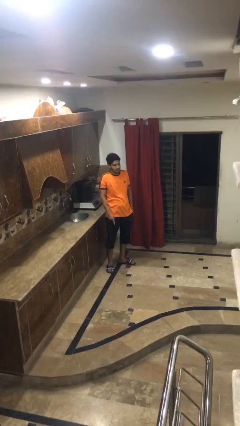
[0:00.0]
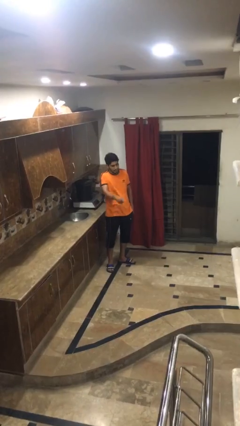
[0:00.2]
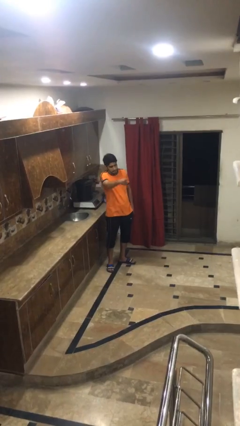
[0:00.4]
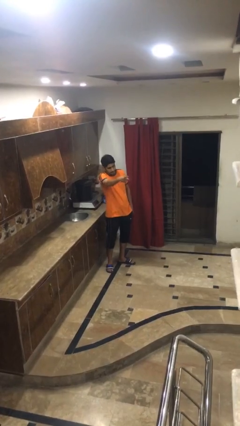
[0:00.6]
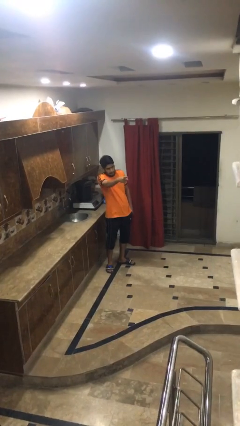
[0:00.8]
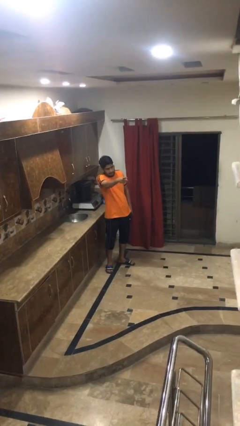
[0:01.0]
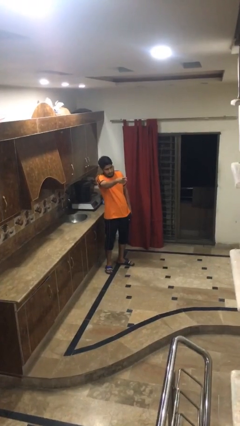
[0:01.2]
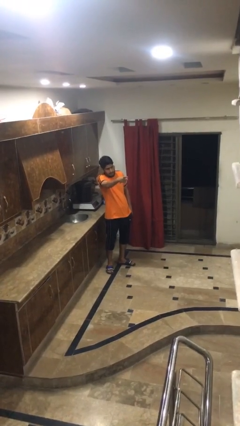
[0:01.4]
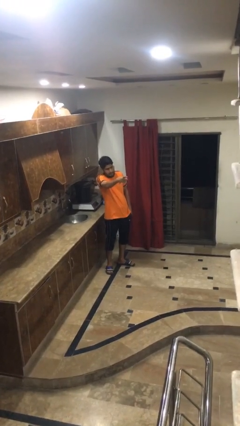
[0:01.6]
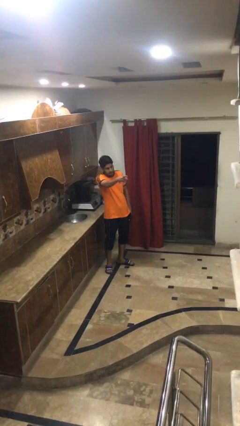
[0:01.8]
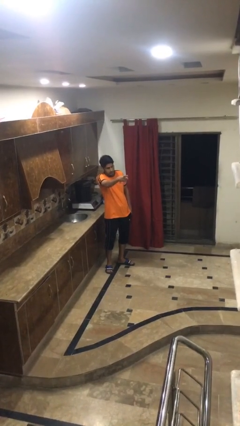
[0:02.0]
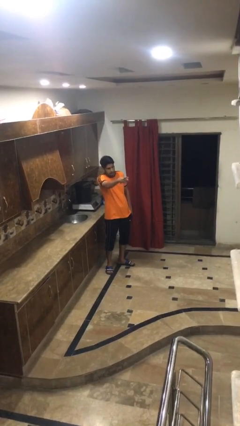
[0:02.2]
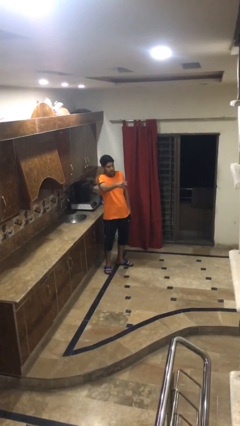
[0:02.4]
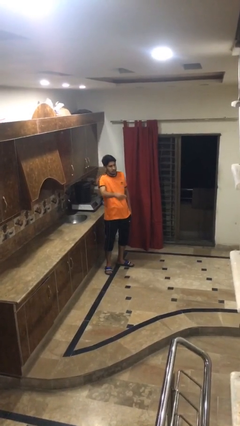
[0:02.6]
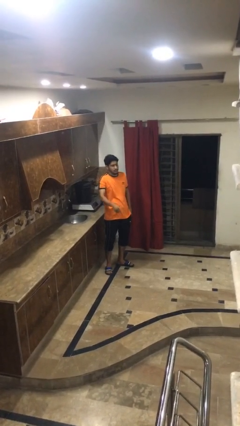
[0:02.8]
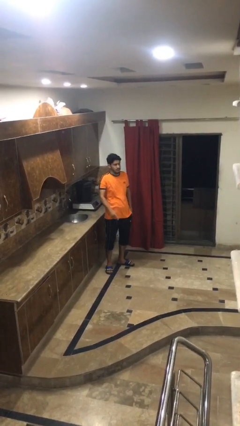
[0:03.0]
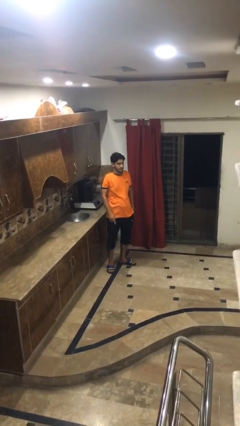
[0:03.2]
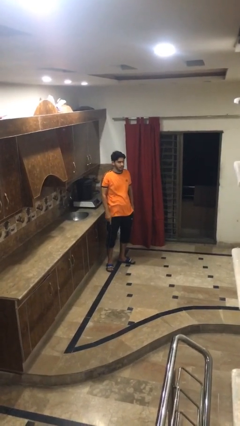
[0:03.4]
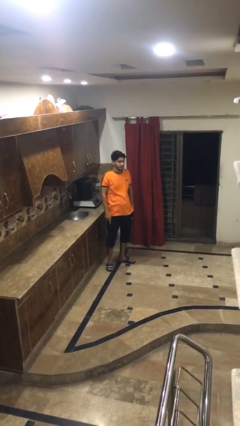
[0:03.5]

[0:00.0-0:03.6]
person points at person

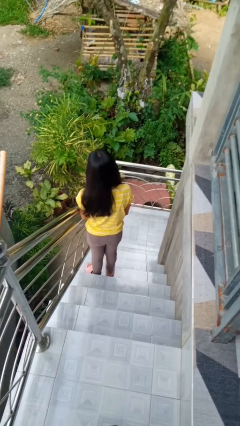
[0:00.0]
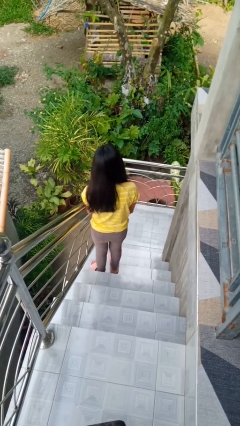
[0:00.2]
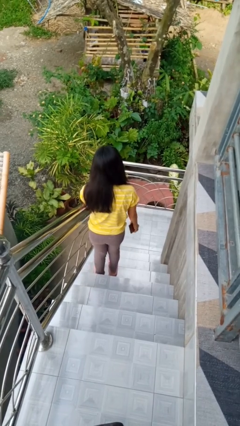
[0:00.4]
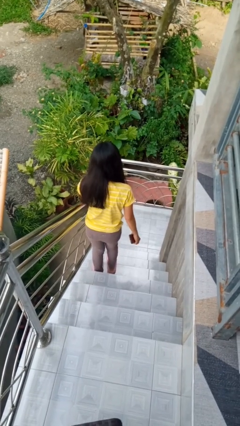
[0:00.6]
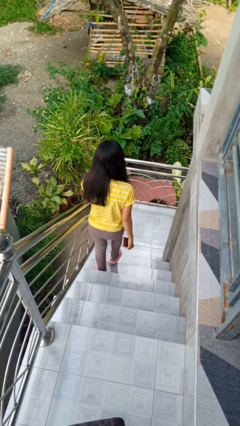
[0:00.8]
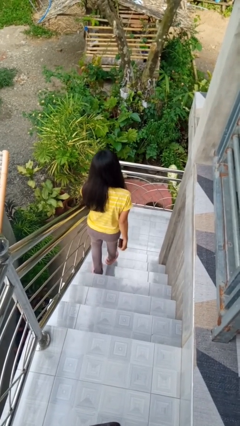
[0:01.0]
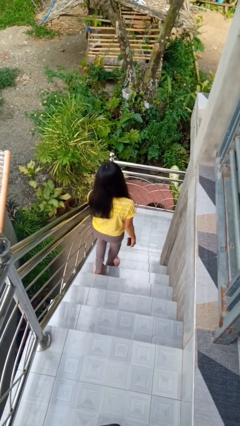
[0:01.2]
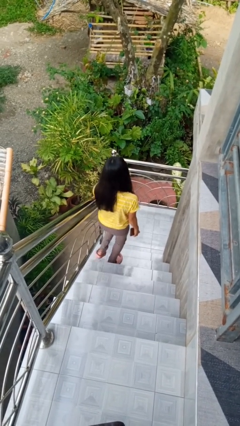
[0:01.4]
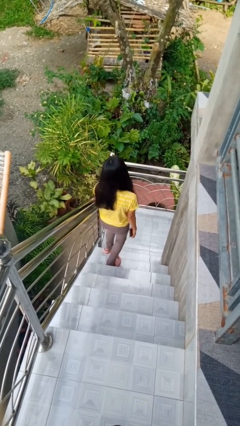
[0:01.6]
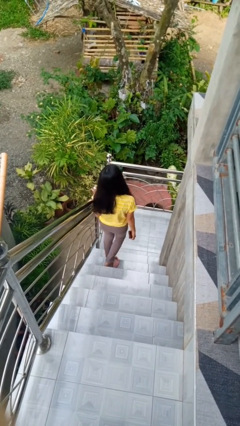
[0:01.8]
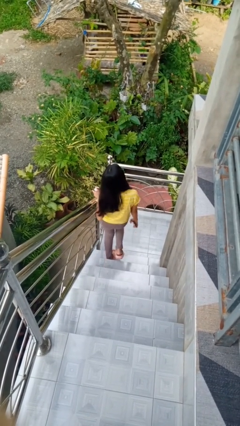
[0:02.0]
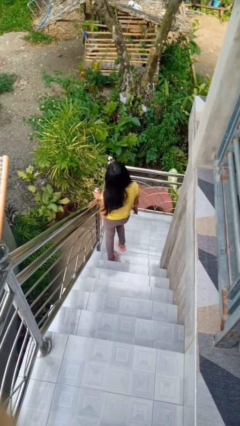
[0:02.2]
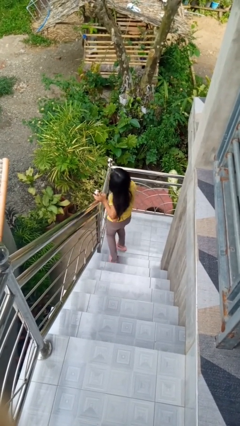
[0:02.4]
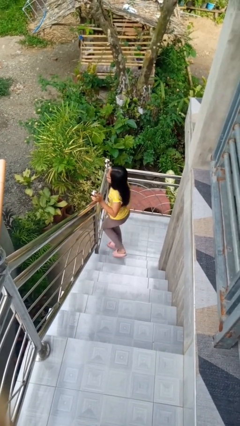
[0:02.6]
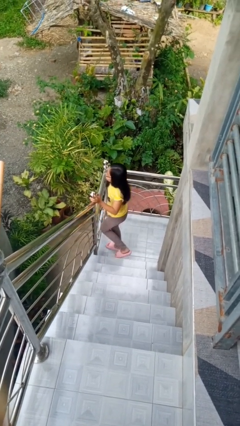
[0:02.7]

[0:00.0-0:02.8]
person climbs down stairs

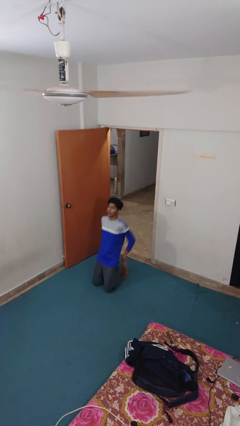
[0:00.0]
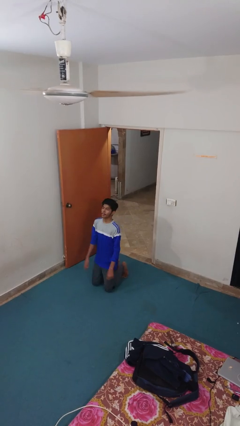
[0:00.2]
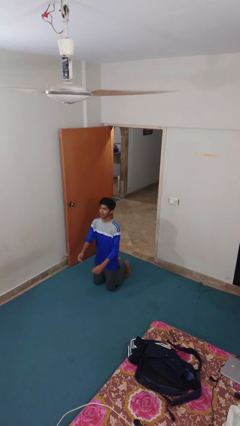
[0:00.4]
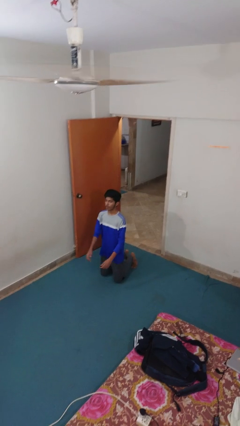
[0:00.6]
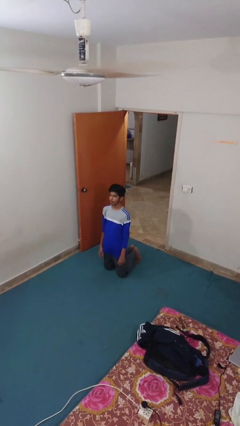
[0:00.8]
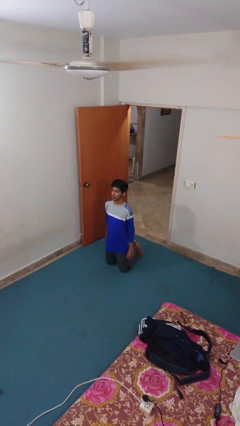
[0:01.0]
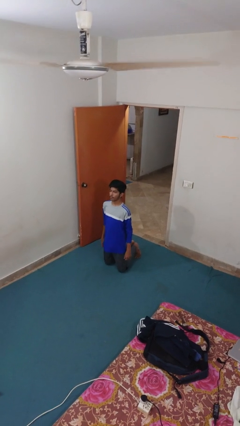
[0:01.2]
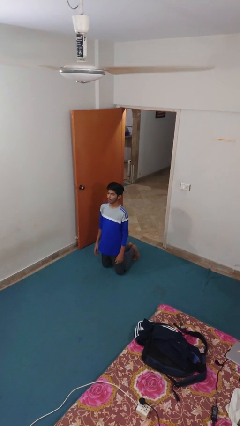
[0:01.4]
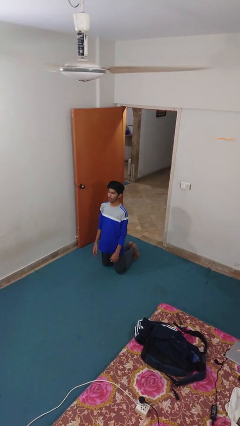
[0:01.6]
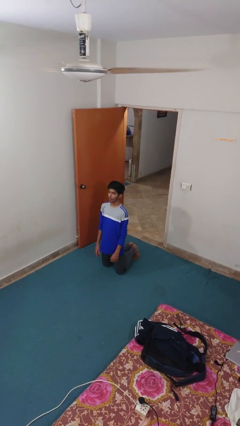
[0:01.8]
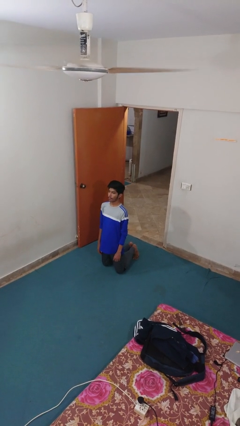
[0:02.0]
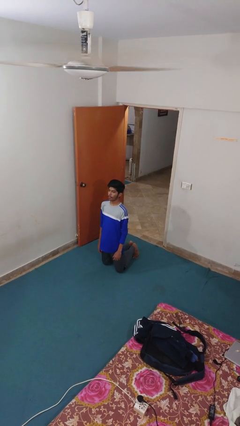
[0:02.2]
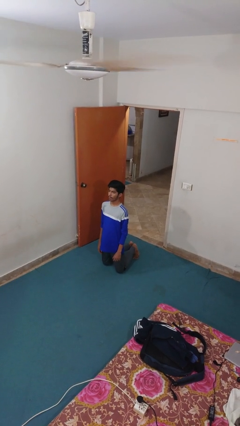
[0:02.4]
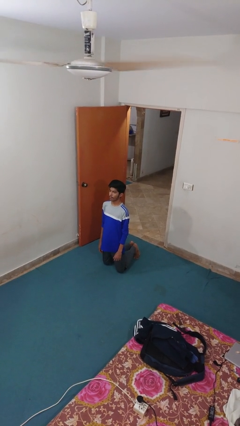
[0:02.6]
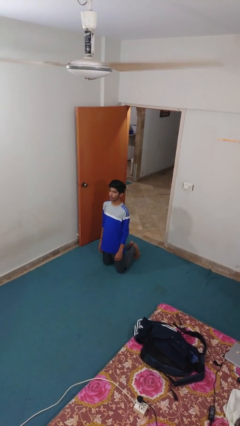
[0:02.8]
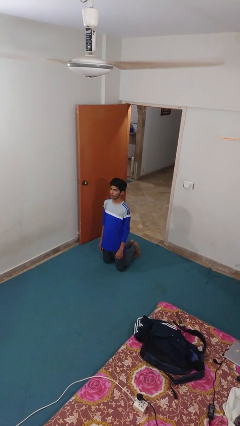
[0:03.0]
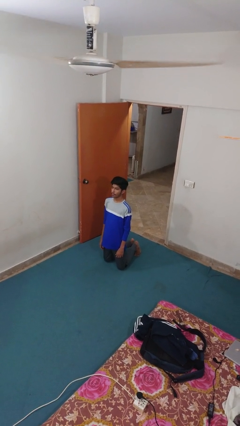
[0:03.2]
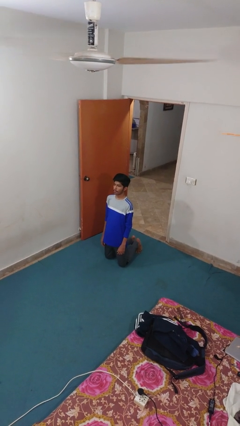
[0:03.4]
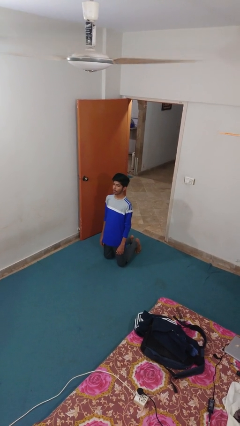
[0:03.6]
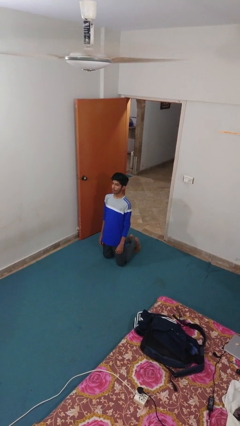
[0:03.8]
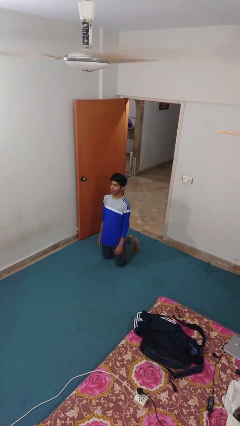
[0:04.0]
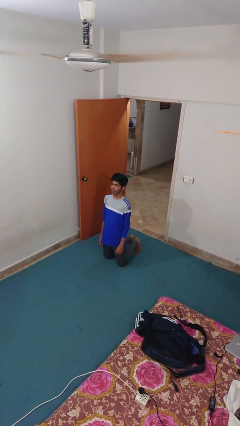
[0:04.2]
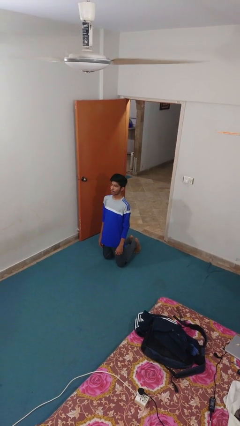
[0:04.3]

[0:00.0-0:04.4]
person kneels

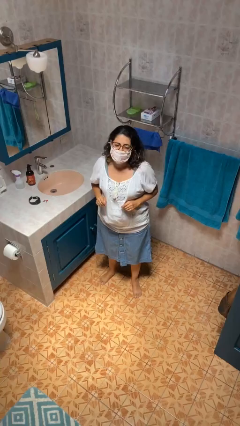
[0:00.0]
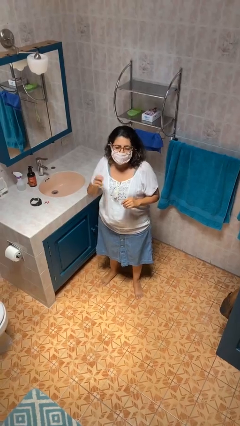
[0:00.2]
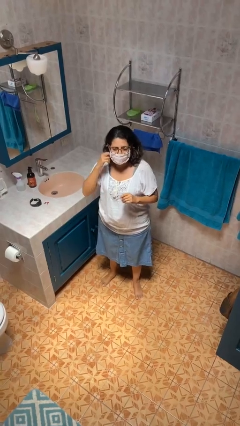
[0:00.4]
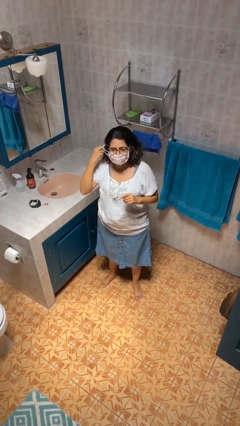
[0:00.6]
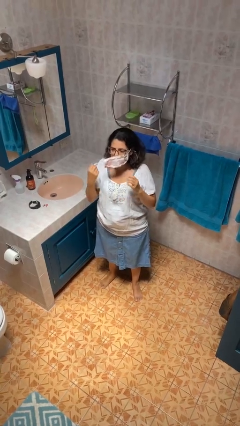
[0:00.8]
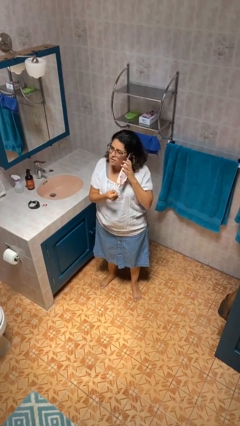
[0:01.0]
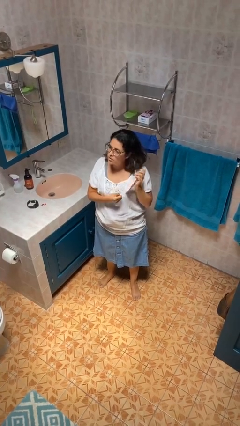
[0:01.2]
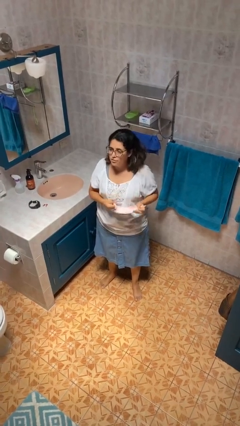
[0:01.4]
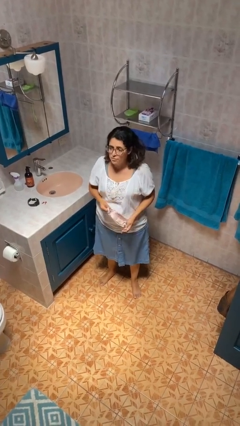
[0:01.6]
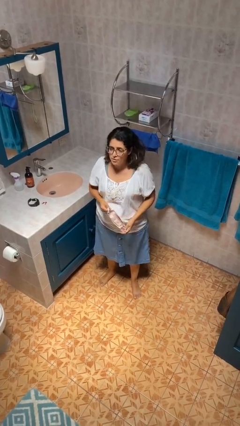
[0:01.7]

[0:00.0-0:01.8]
person takes off facemask

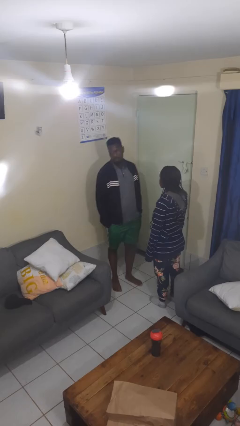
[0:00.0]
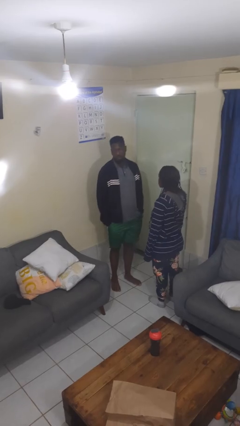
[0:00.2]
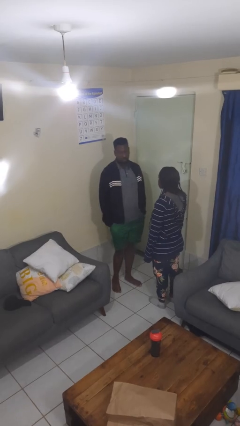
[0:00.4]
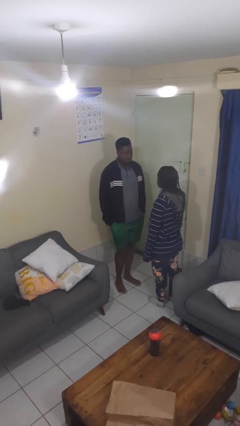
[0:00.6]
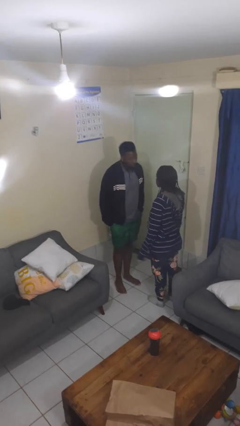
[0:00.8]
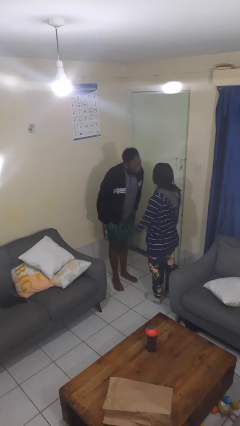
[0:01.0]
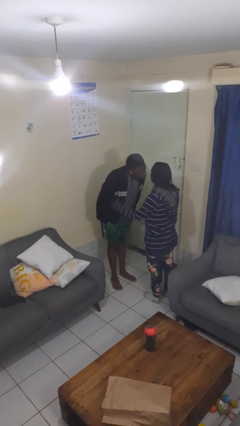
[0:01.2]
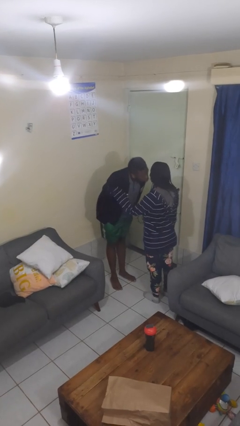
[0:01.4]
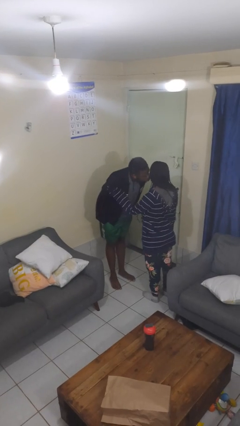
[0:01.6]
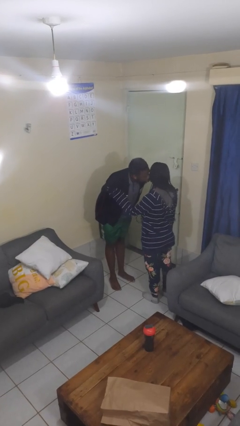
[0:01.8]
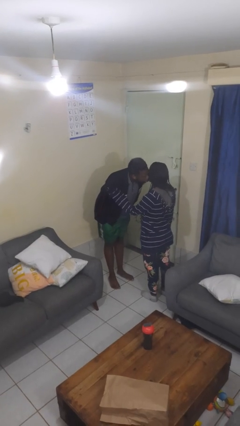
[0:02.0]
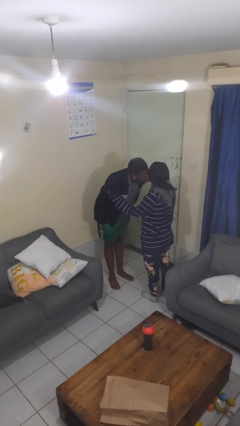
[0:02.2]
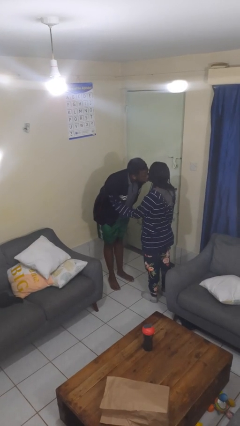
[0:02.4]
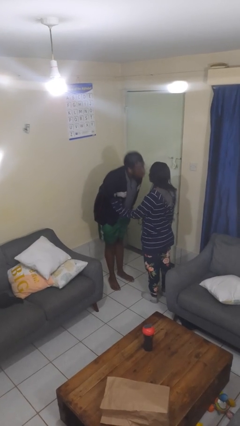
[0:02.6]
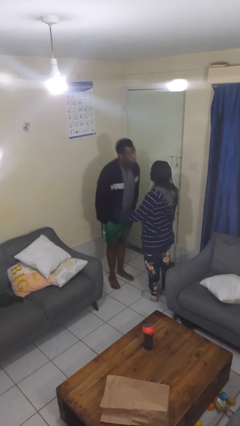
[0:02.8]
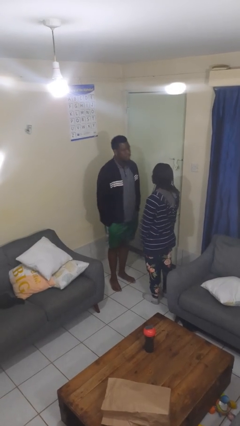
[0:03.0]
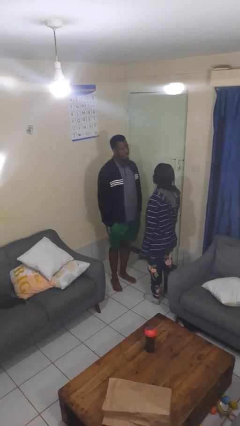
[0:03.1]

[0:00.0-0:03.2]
person kisses cheek of person

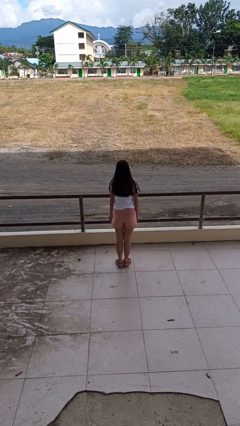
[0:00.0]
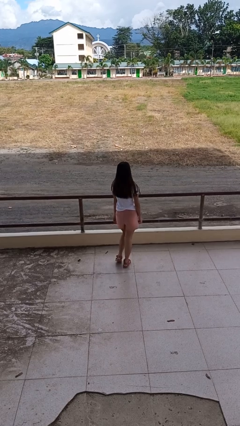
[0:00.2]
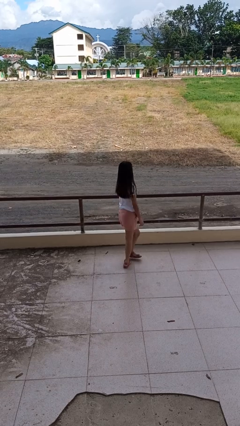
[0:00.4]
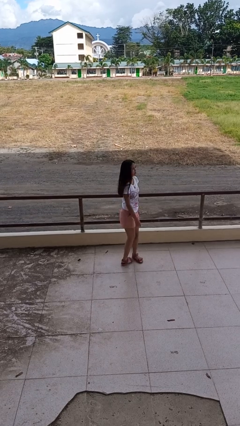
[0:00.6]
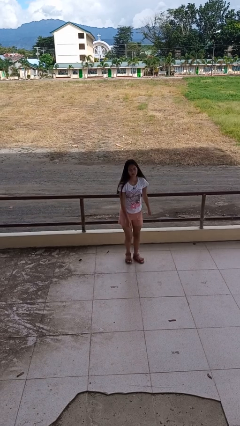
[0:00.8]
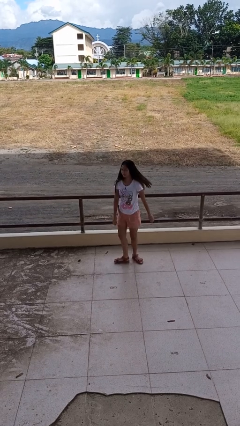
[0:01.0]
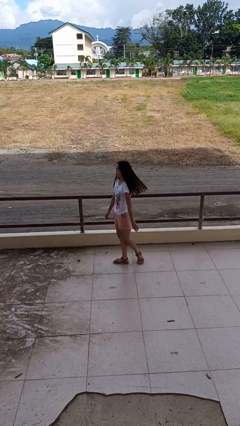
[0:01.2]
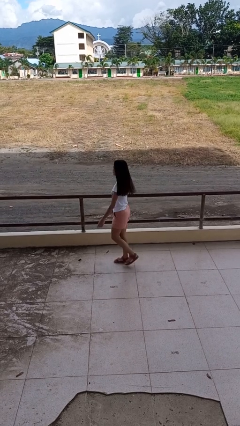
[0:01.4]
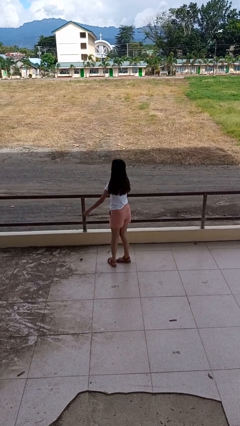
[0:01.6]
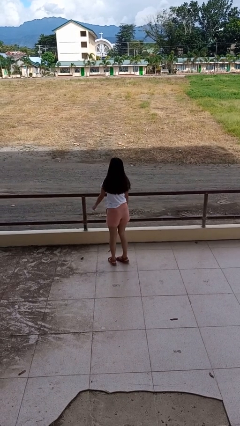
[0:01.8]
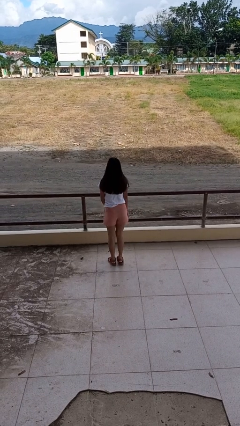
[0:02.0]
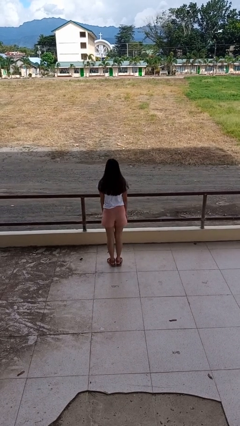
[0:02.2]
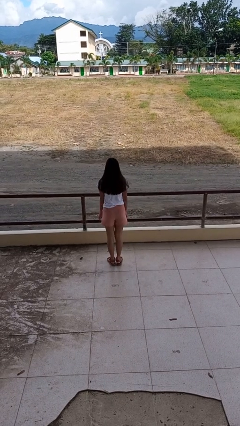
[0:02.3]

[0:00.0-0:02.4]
person twirls
